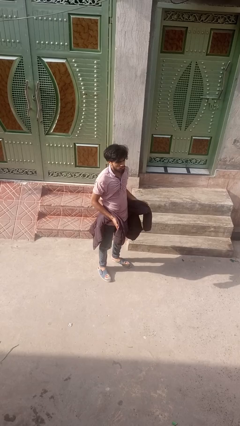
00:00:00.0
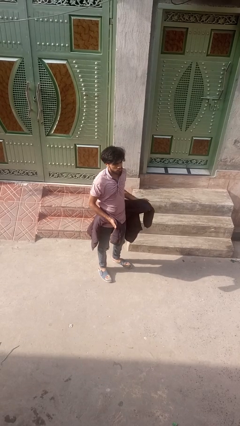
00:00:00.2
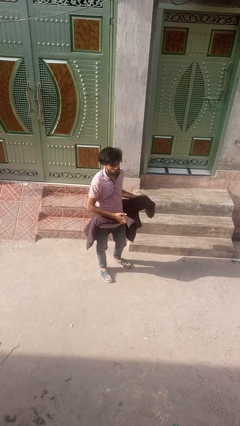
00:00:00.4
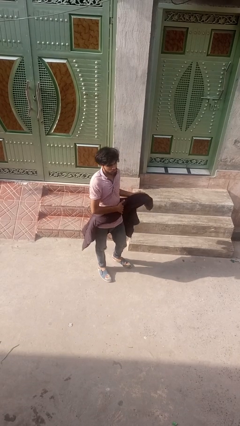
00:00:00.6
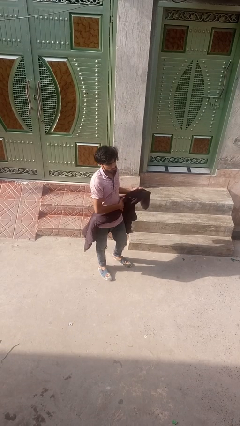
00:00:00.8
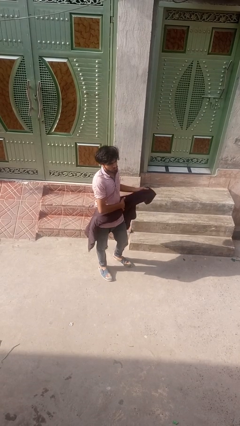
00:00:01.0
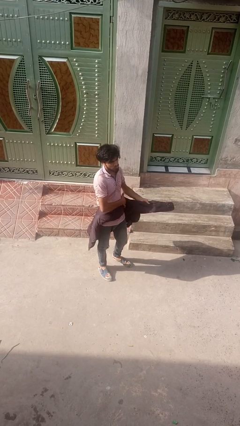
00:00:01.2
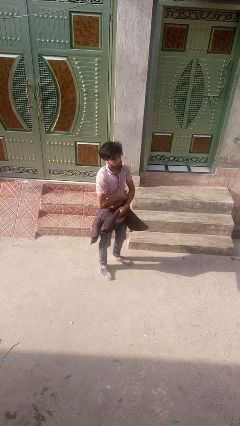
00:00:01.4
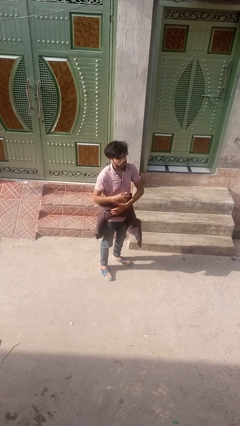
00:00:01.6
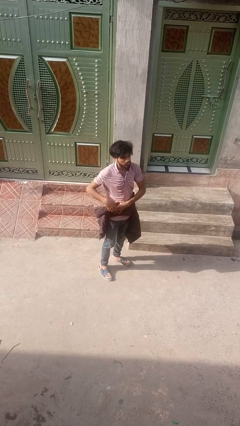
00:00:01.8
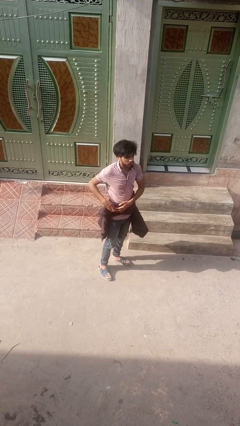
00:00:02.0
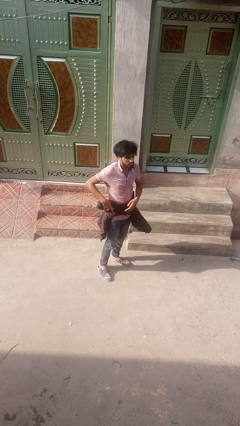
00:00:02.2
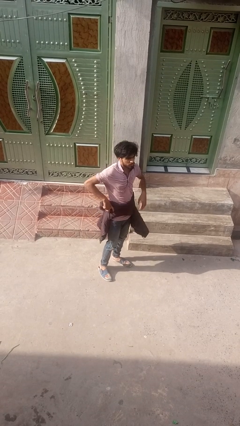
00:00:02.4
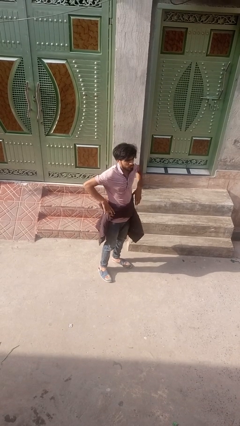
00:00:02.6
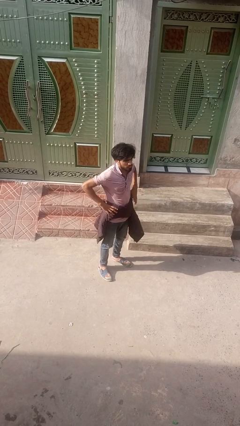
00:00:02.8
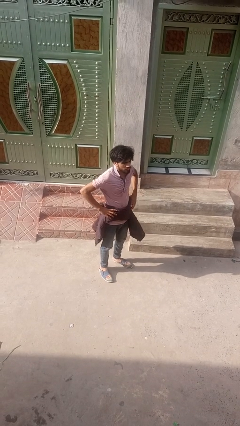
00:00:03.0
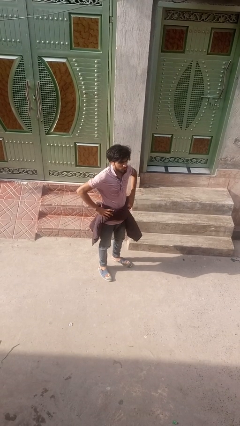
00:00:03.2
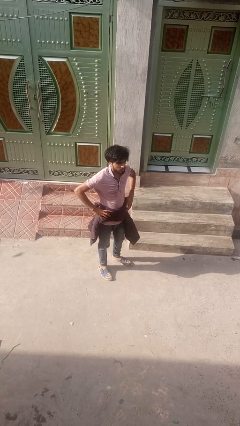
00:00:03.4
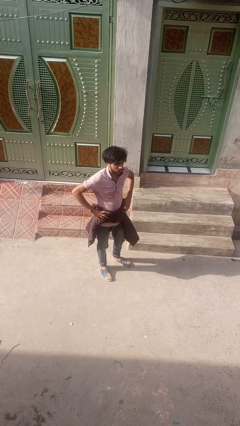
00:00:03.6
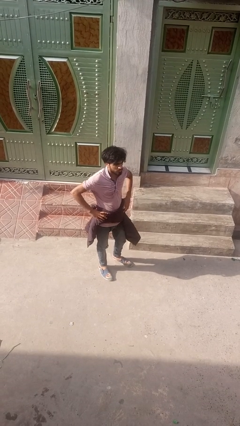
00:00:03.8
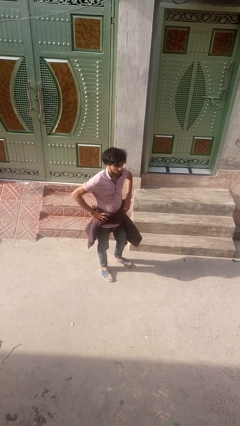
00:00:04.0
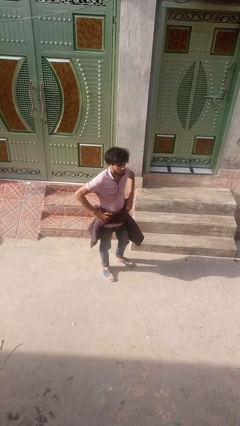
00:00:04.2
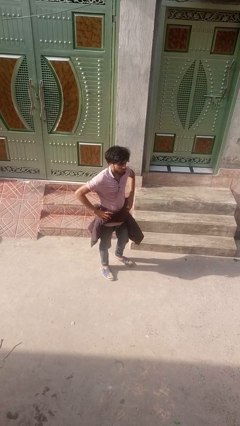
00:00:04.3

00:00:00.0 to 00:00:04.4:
person ties jacket around waist

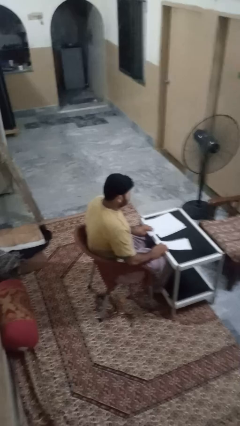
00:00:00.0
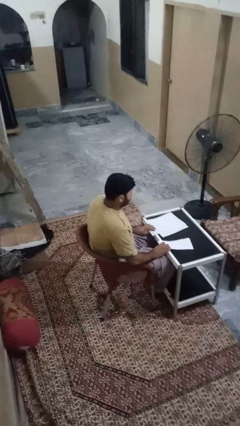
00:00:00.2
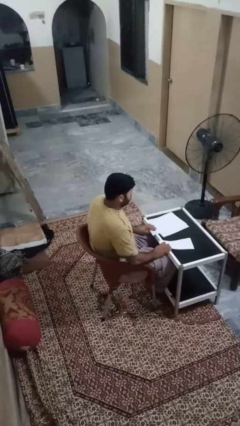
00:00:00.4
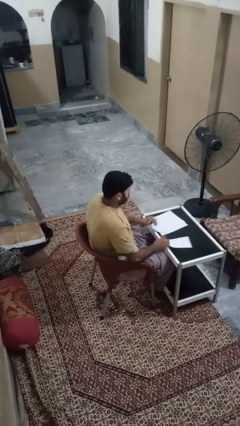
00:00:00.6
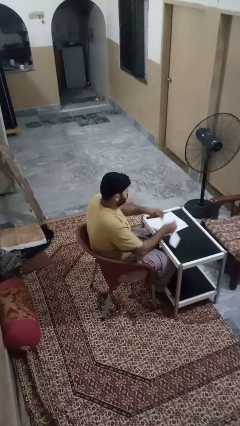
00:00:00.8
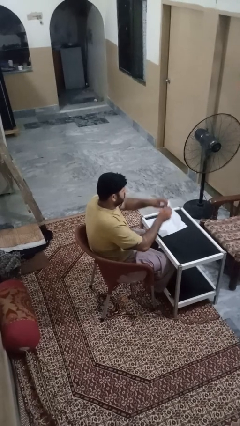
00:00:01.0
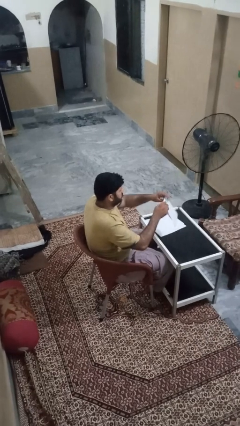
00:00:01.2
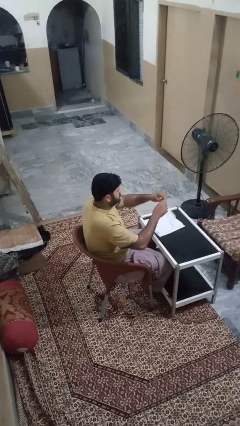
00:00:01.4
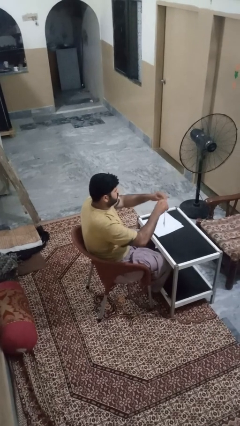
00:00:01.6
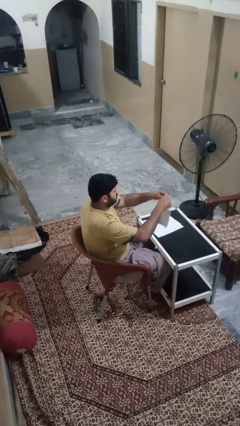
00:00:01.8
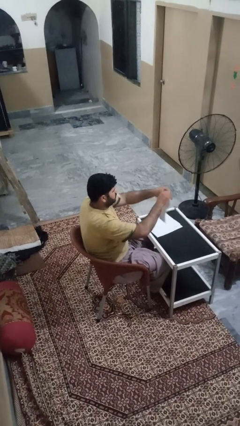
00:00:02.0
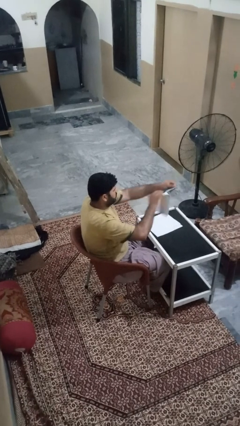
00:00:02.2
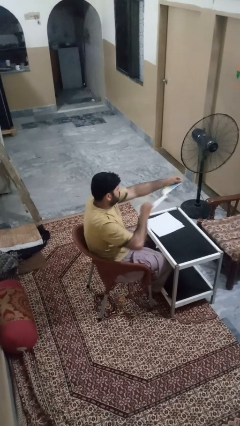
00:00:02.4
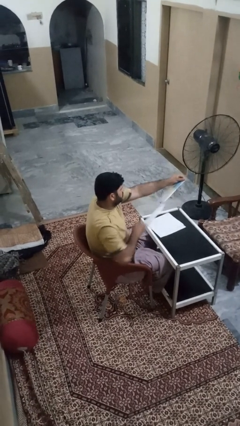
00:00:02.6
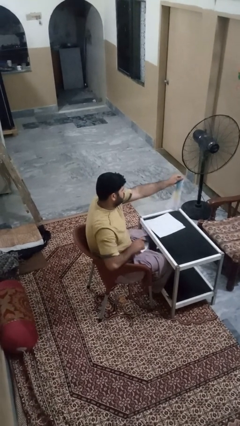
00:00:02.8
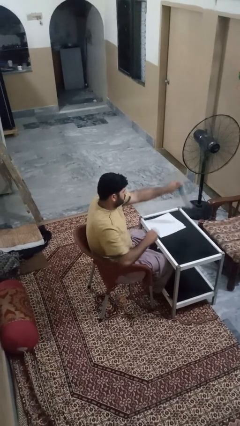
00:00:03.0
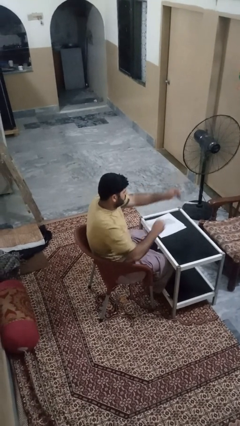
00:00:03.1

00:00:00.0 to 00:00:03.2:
person tears paper

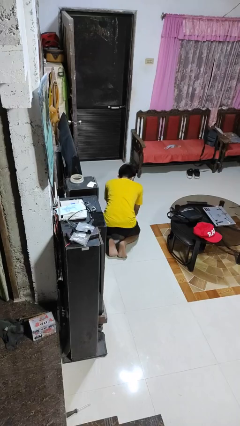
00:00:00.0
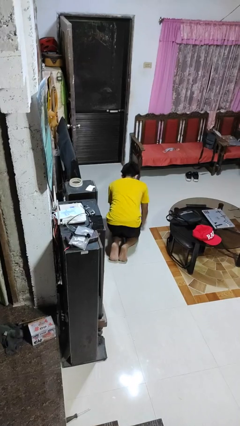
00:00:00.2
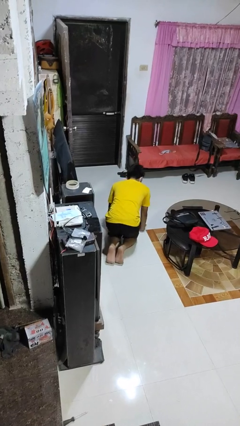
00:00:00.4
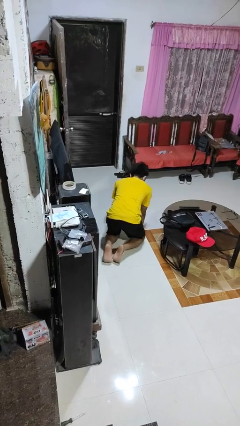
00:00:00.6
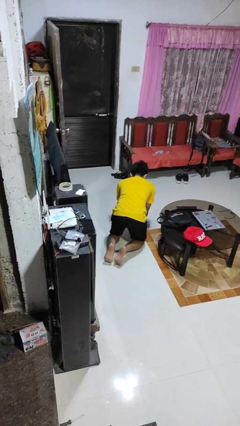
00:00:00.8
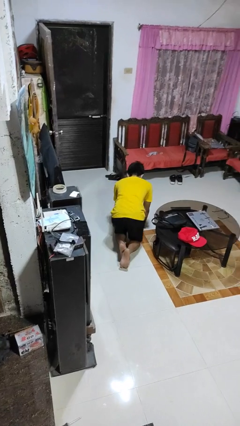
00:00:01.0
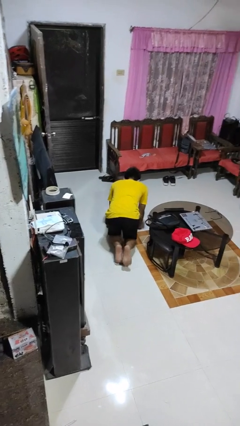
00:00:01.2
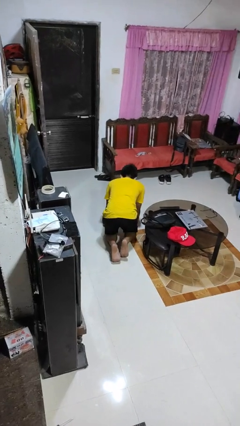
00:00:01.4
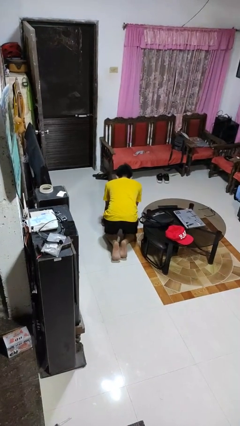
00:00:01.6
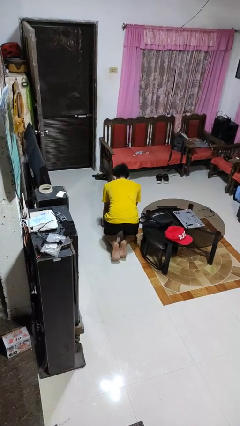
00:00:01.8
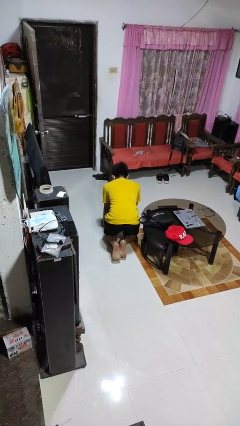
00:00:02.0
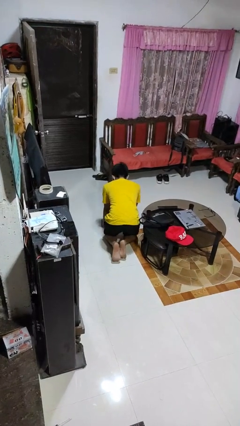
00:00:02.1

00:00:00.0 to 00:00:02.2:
person crawls

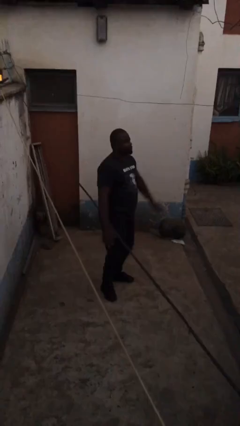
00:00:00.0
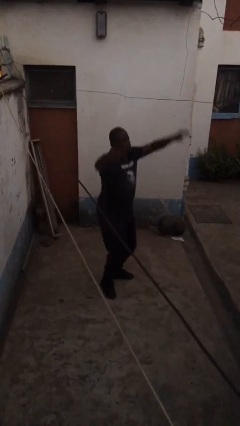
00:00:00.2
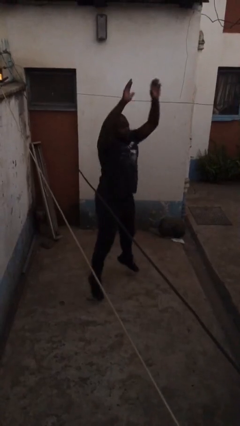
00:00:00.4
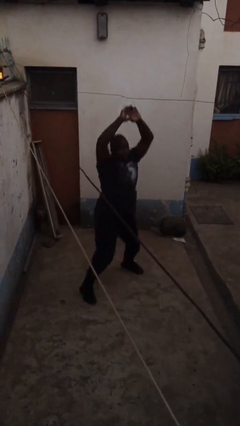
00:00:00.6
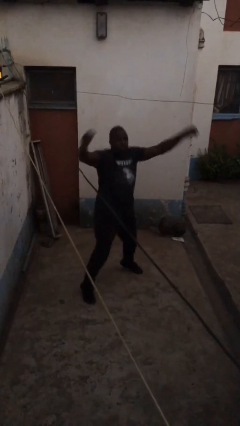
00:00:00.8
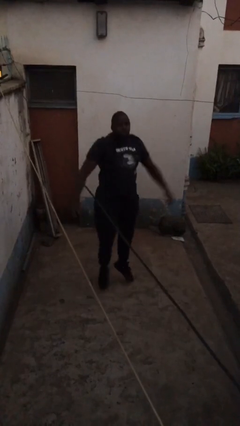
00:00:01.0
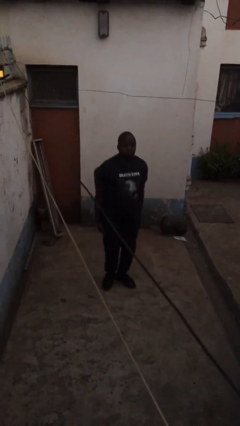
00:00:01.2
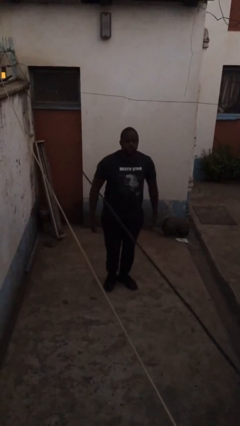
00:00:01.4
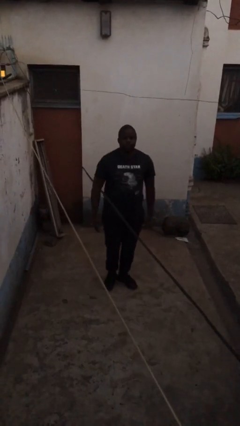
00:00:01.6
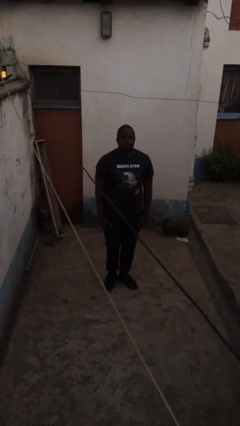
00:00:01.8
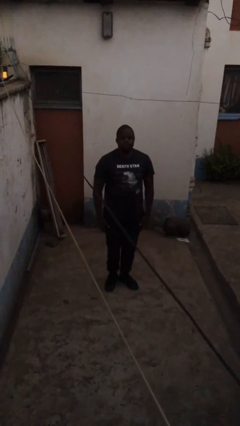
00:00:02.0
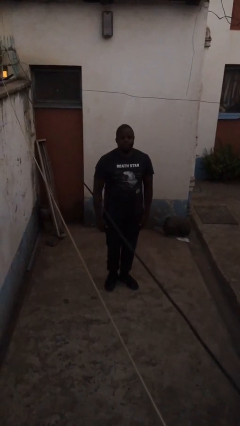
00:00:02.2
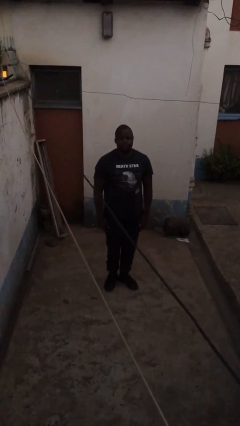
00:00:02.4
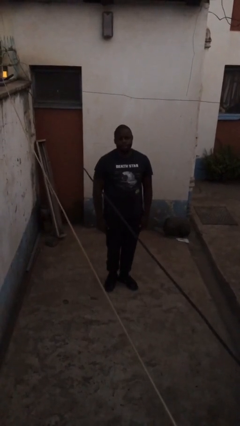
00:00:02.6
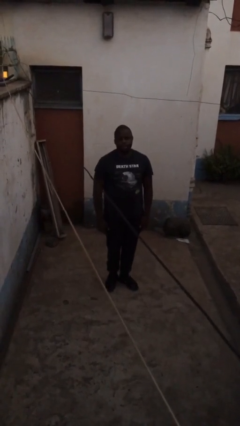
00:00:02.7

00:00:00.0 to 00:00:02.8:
person exercises with jumping jacks

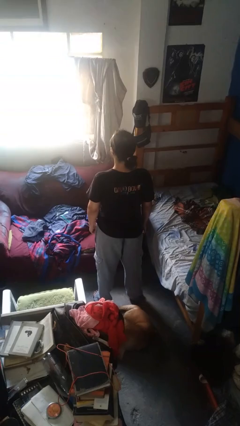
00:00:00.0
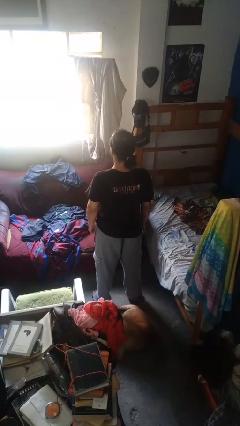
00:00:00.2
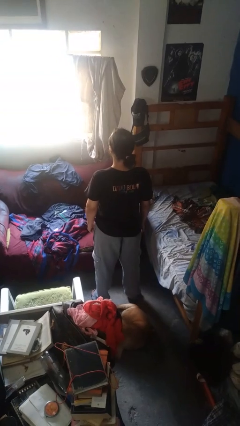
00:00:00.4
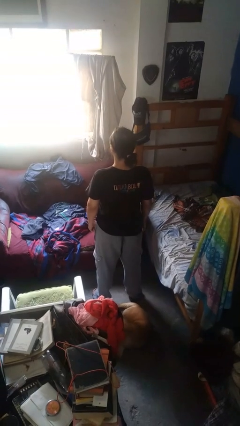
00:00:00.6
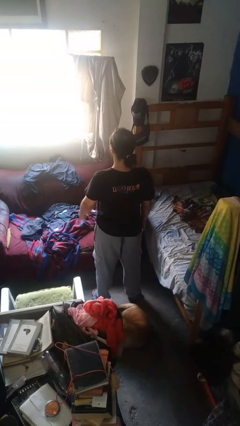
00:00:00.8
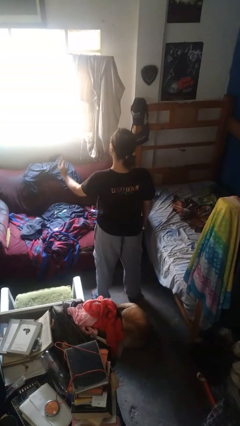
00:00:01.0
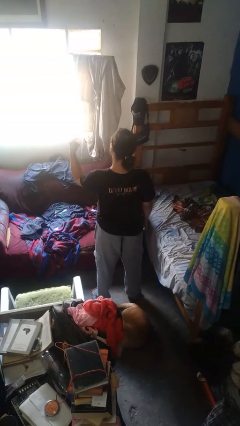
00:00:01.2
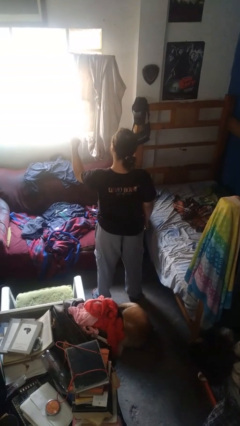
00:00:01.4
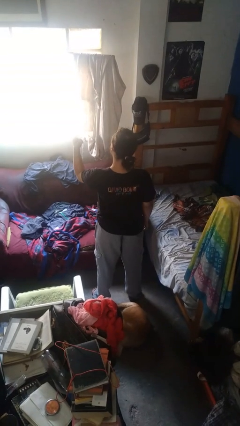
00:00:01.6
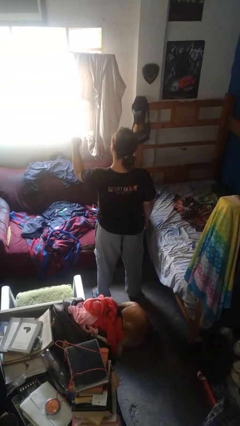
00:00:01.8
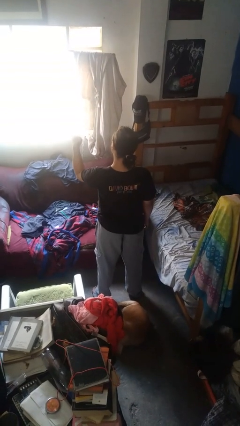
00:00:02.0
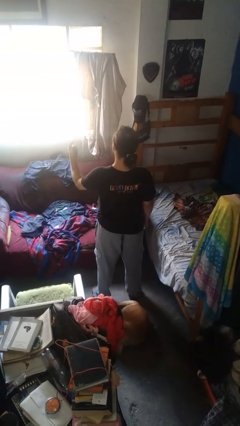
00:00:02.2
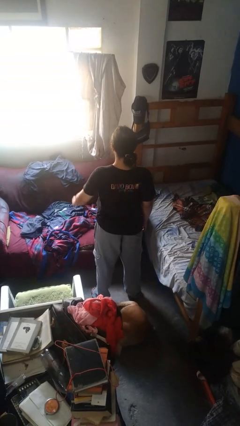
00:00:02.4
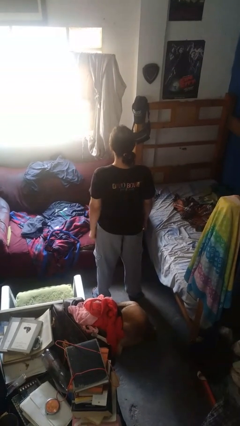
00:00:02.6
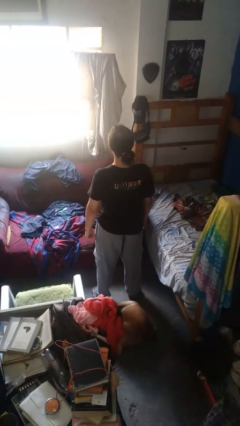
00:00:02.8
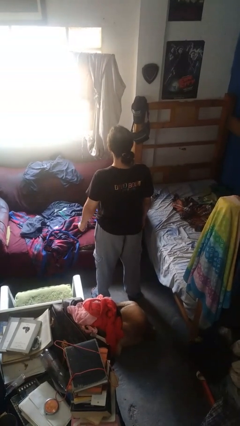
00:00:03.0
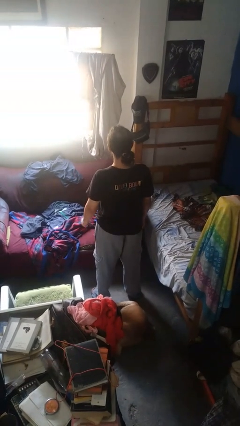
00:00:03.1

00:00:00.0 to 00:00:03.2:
person gestures number one

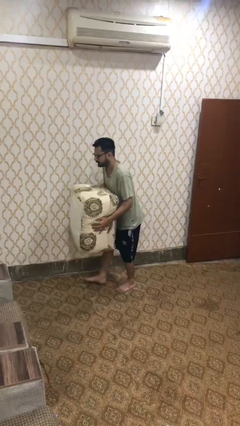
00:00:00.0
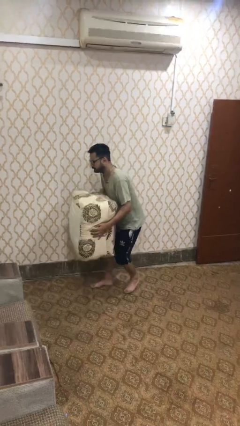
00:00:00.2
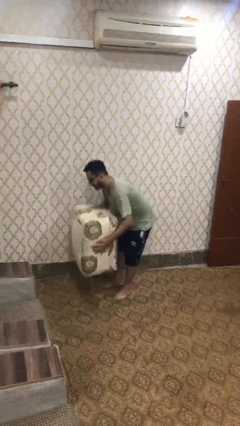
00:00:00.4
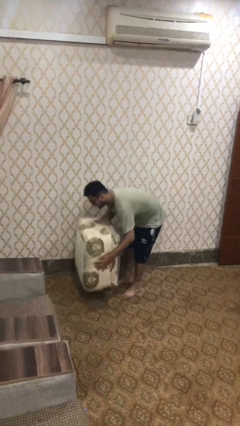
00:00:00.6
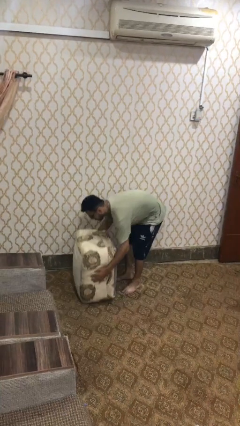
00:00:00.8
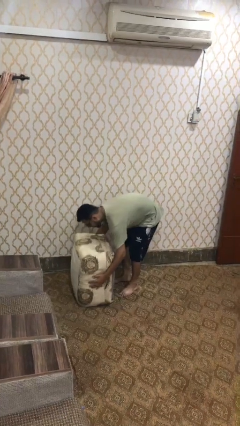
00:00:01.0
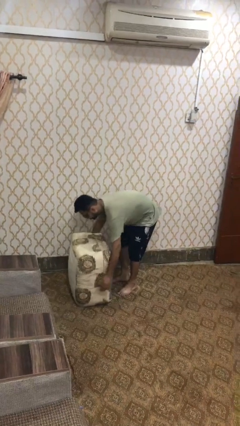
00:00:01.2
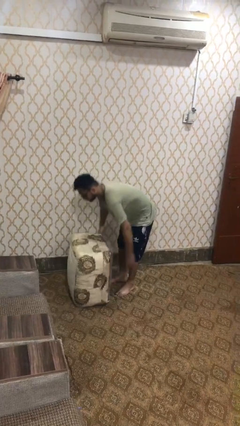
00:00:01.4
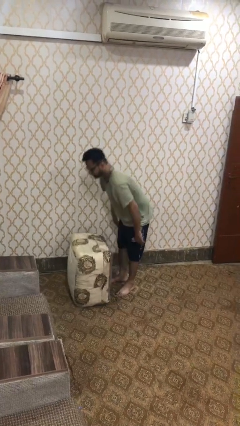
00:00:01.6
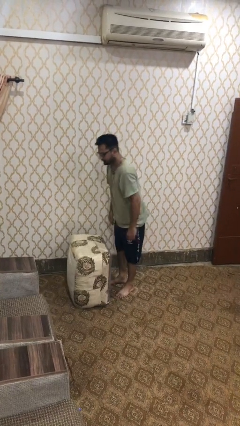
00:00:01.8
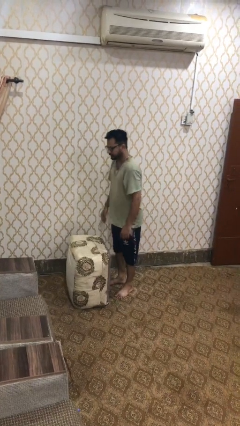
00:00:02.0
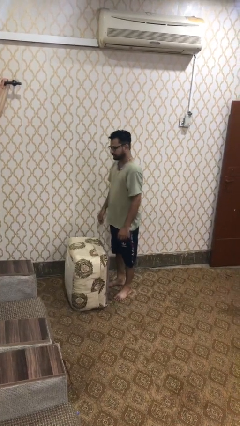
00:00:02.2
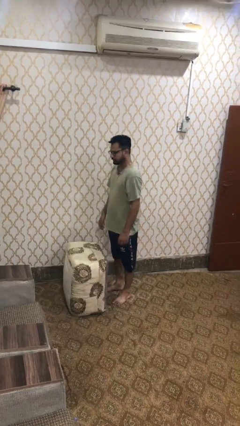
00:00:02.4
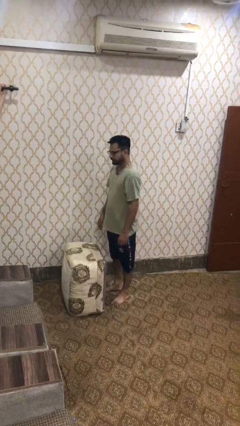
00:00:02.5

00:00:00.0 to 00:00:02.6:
person puts down object on floor
